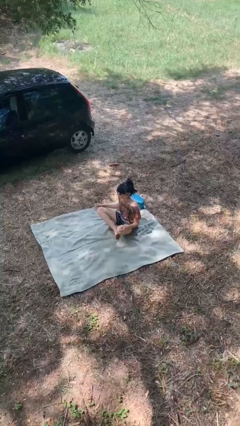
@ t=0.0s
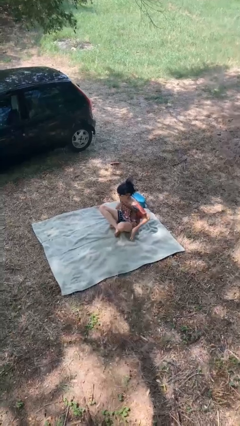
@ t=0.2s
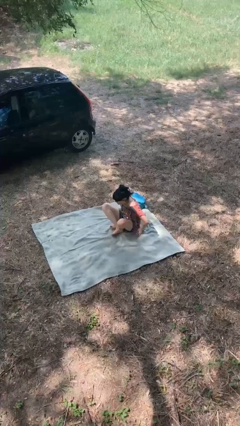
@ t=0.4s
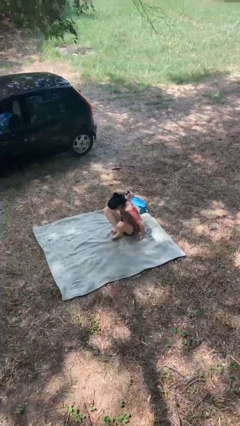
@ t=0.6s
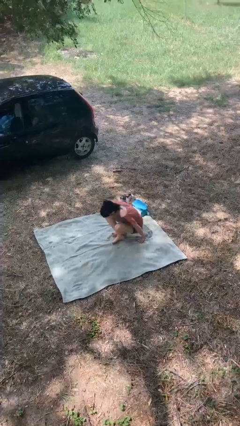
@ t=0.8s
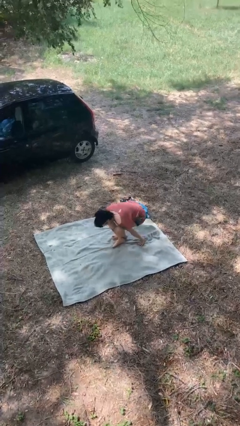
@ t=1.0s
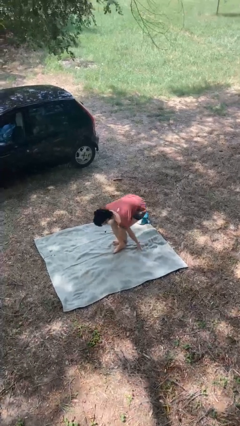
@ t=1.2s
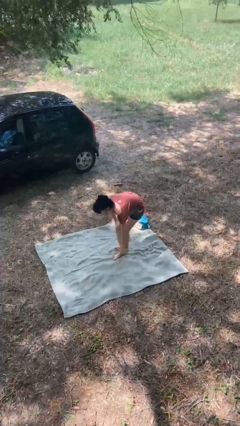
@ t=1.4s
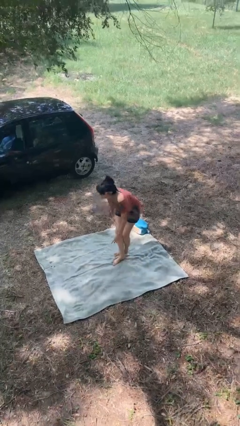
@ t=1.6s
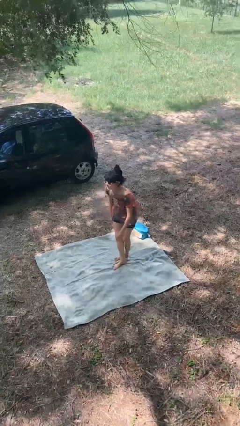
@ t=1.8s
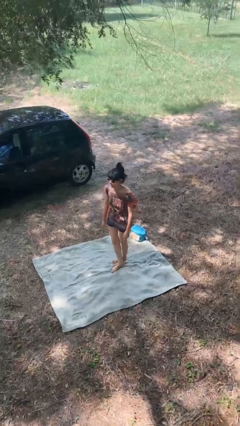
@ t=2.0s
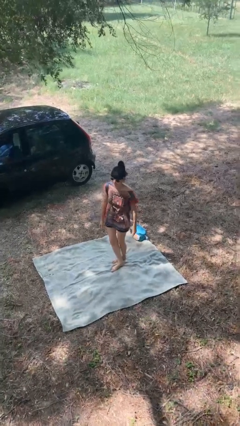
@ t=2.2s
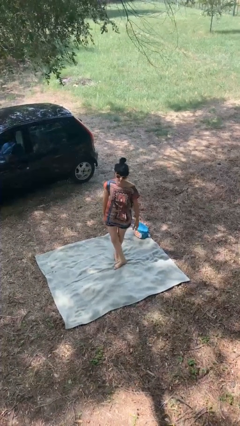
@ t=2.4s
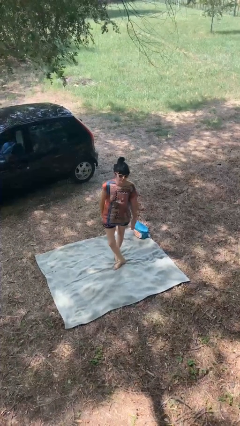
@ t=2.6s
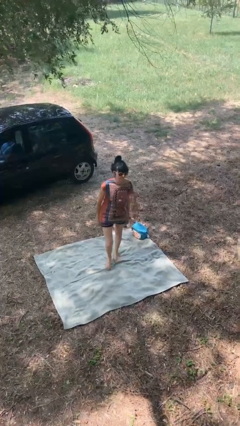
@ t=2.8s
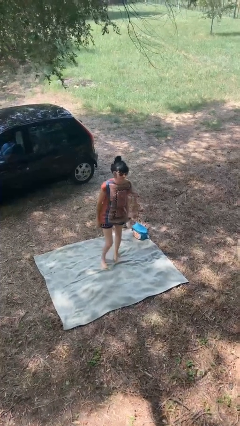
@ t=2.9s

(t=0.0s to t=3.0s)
person stands up from floor

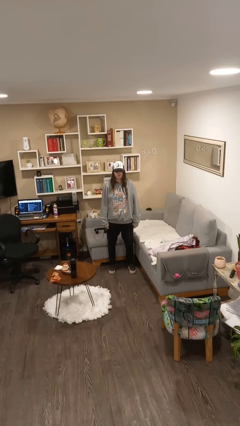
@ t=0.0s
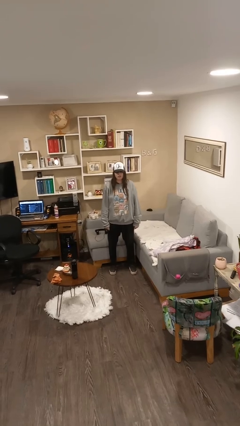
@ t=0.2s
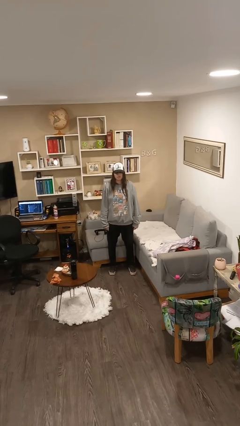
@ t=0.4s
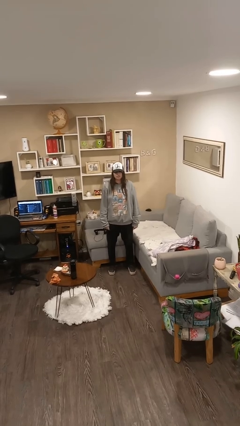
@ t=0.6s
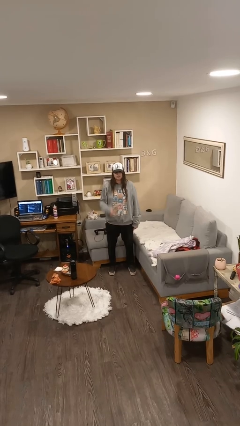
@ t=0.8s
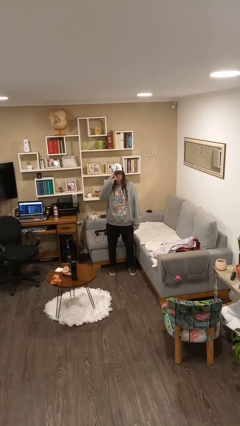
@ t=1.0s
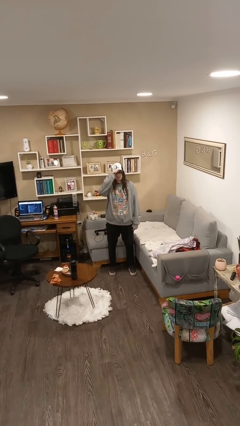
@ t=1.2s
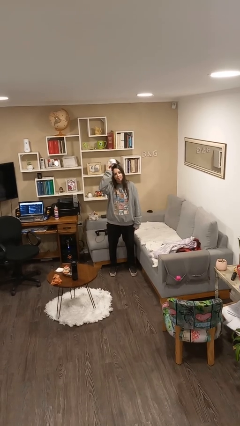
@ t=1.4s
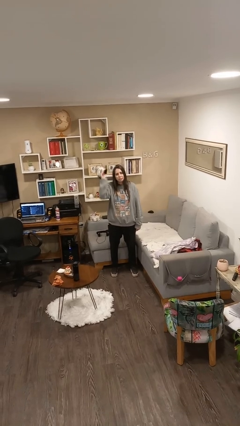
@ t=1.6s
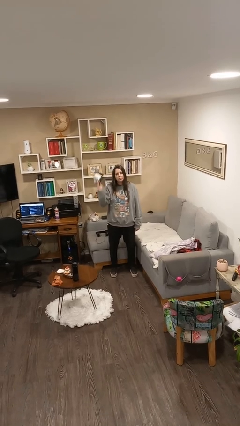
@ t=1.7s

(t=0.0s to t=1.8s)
person takes off hat

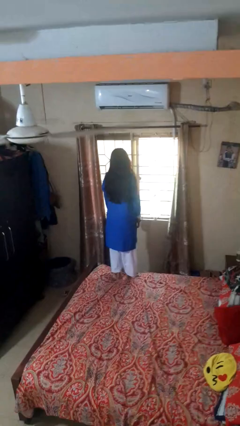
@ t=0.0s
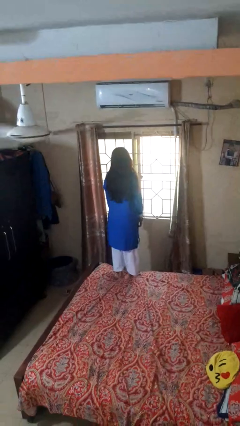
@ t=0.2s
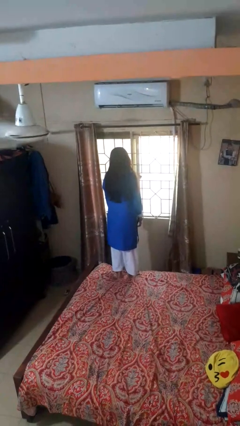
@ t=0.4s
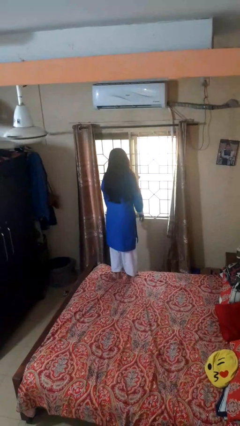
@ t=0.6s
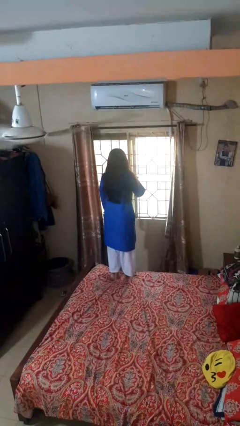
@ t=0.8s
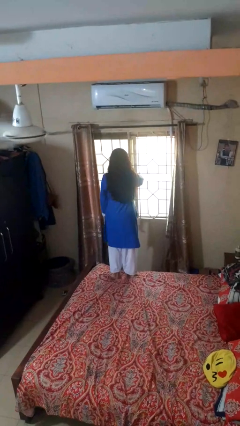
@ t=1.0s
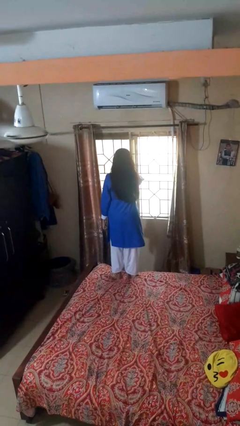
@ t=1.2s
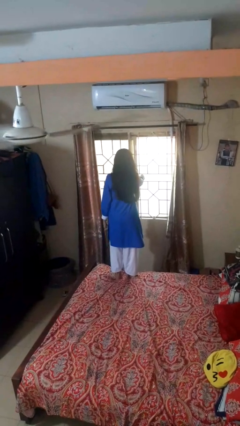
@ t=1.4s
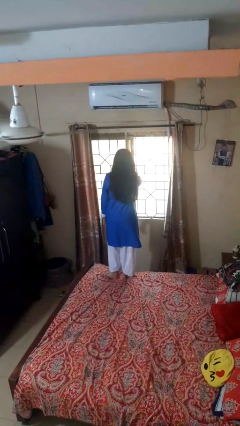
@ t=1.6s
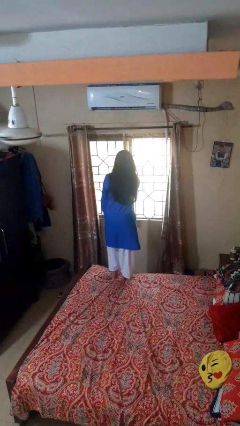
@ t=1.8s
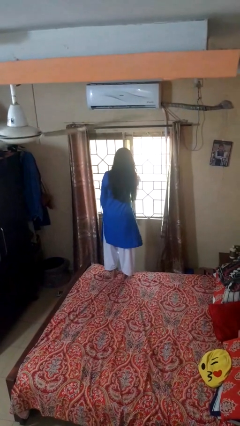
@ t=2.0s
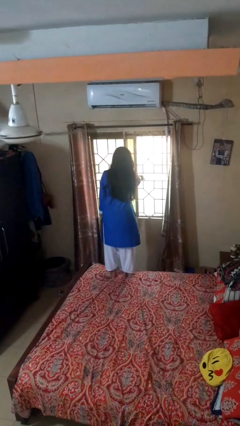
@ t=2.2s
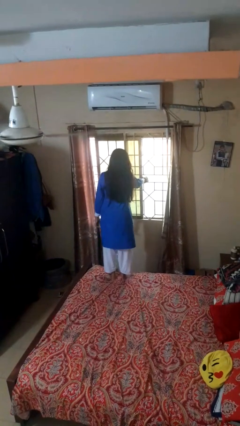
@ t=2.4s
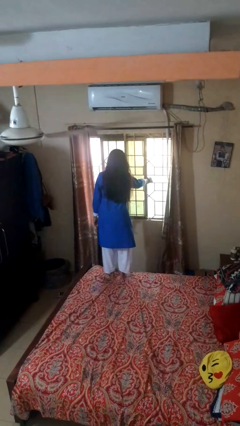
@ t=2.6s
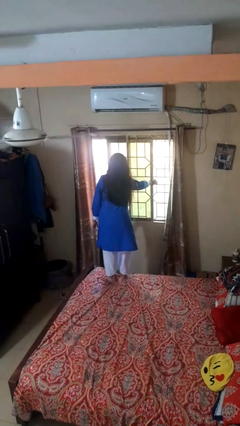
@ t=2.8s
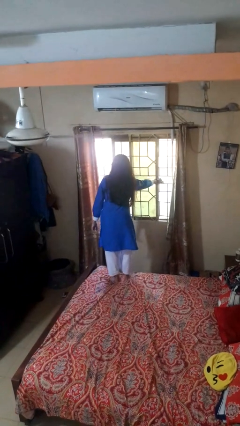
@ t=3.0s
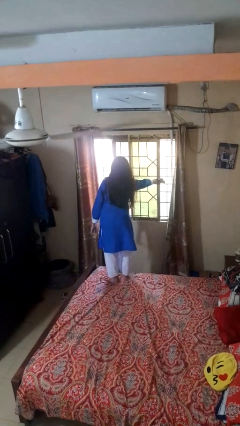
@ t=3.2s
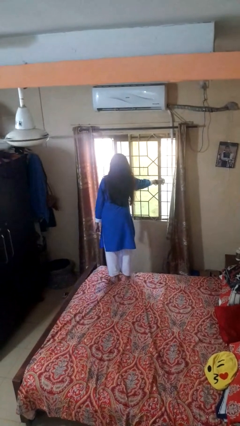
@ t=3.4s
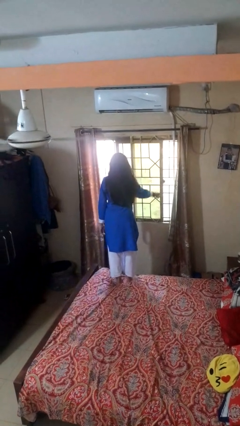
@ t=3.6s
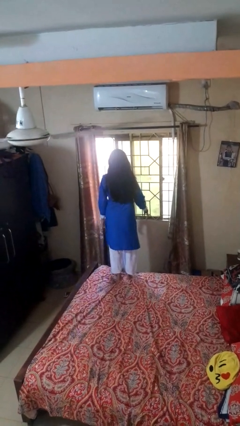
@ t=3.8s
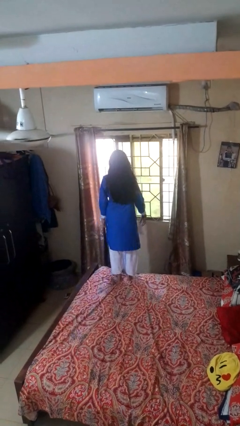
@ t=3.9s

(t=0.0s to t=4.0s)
person opens home window

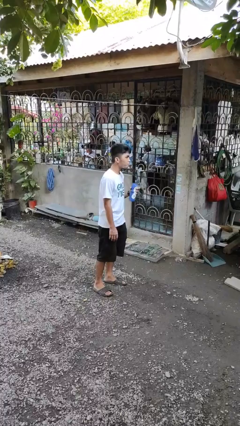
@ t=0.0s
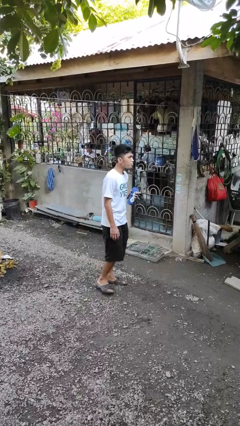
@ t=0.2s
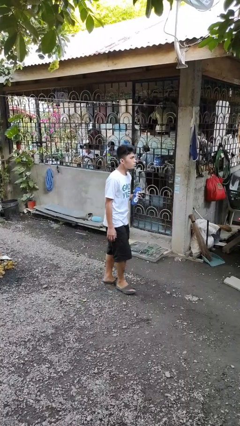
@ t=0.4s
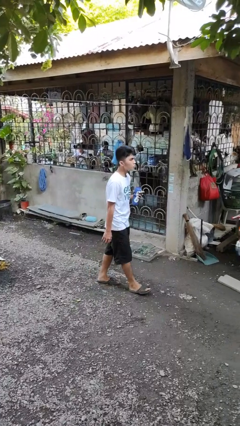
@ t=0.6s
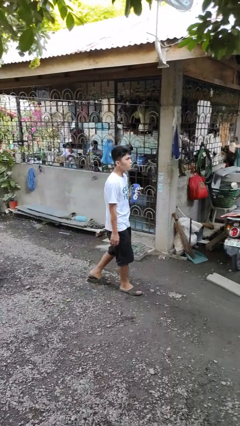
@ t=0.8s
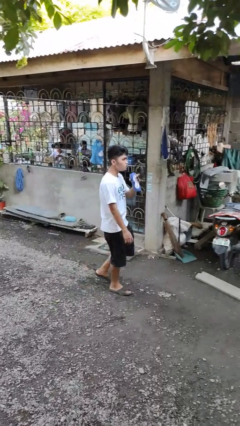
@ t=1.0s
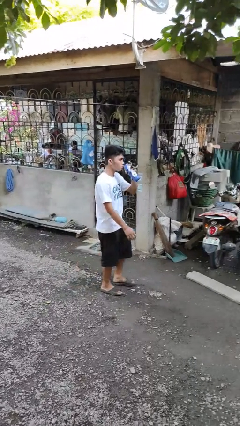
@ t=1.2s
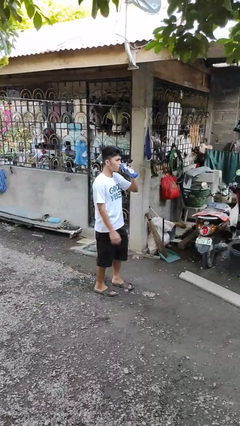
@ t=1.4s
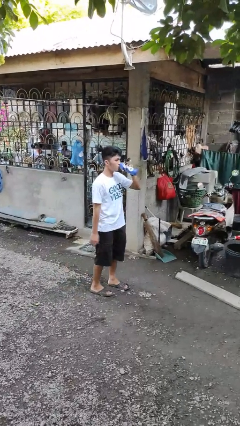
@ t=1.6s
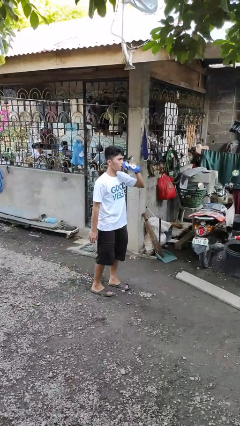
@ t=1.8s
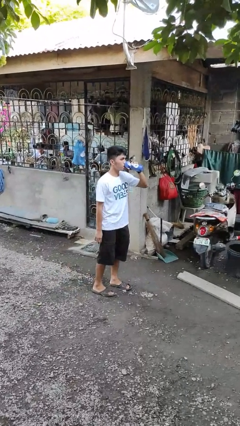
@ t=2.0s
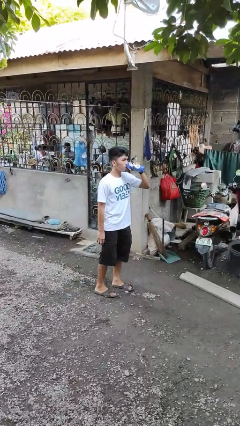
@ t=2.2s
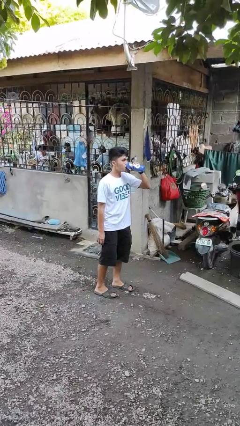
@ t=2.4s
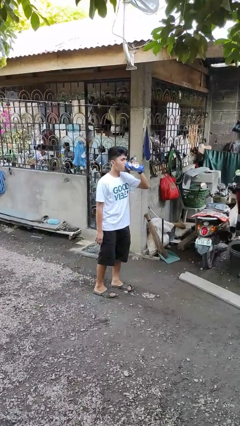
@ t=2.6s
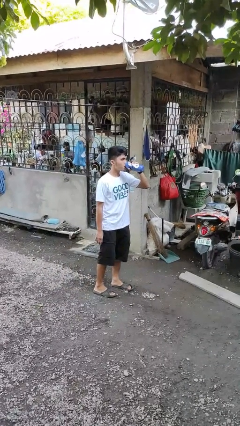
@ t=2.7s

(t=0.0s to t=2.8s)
person drinks from bottle

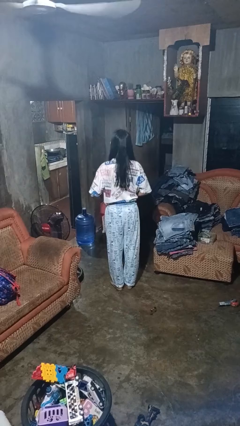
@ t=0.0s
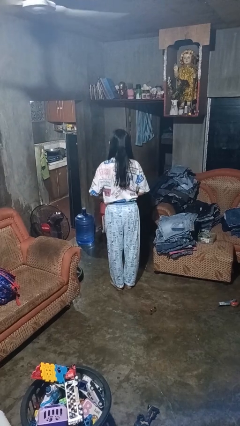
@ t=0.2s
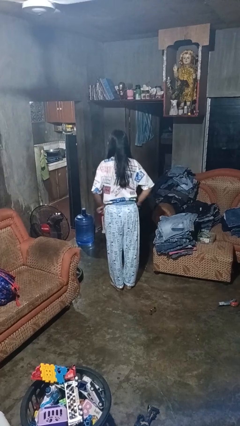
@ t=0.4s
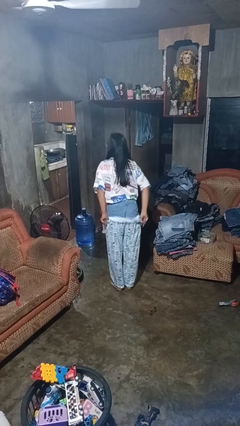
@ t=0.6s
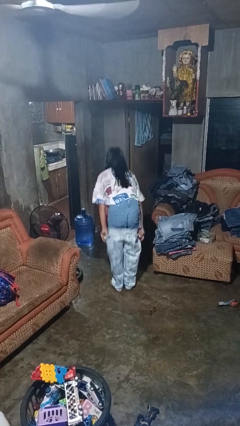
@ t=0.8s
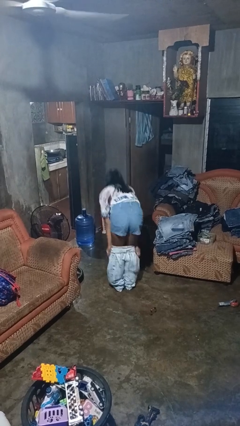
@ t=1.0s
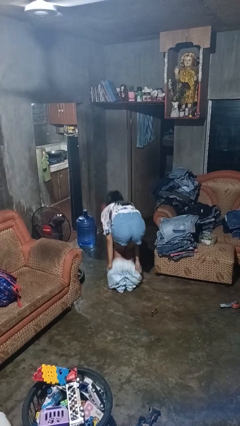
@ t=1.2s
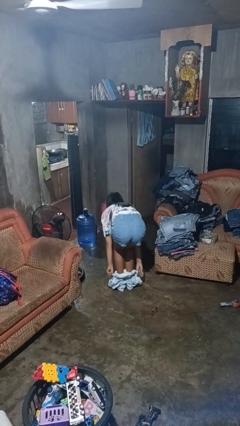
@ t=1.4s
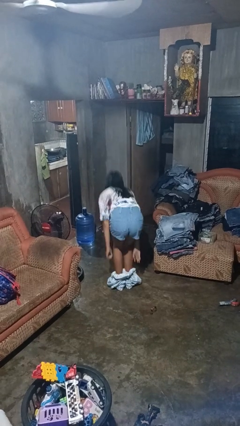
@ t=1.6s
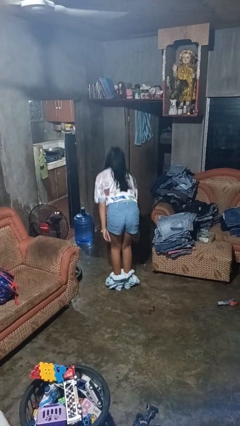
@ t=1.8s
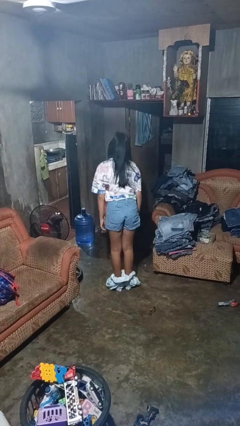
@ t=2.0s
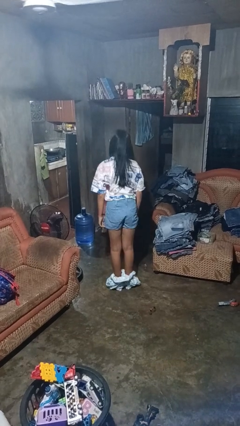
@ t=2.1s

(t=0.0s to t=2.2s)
person takes off pants

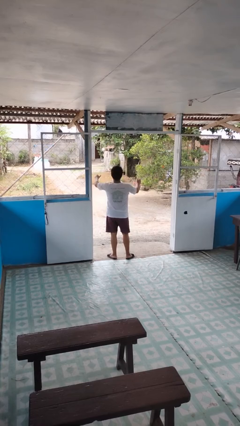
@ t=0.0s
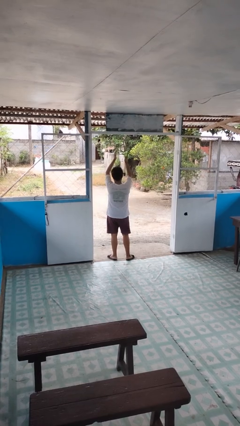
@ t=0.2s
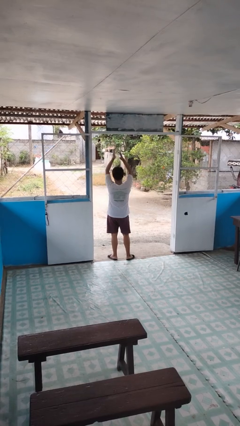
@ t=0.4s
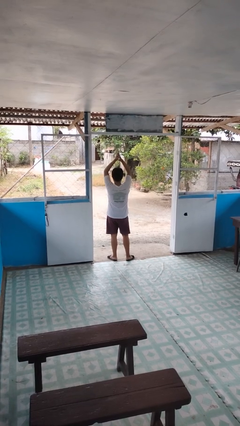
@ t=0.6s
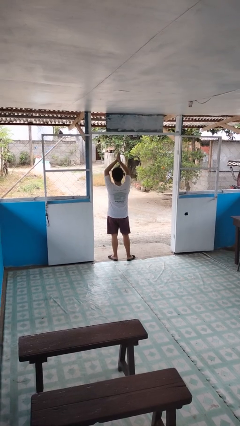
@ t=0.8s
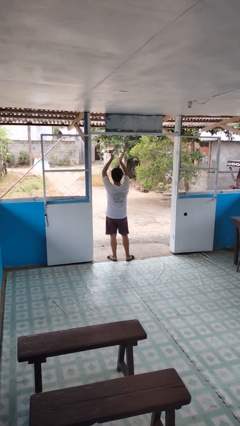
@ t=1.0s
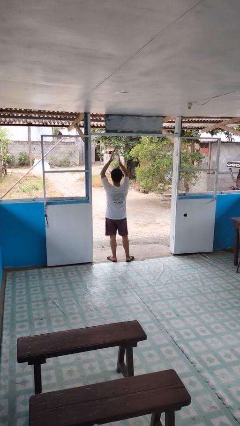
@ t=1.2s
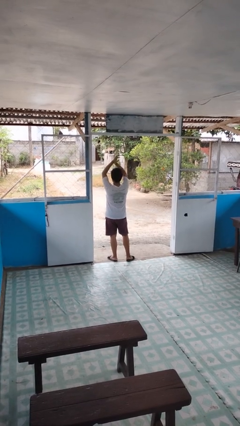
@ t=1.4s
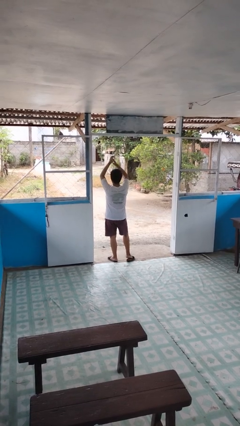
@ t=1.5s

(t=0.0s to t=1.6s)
person claps hands

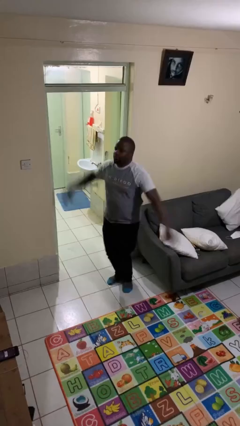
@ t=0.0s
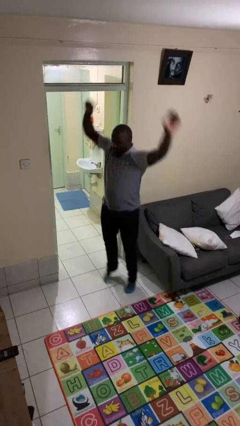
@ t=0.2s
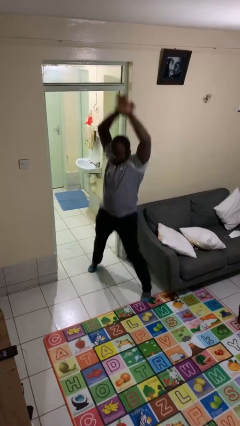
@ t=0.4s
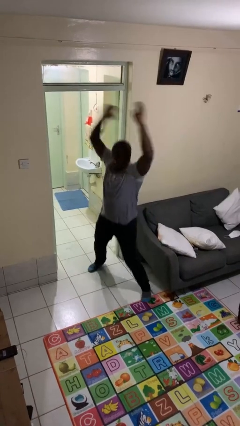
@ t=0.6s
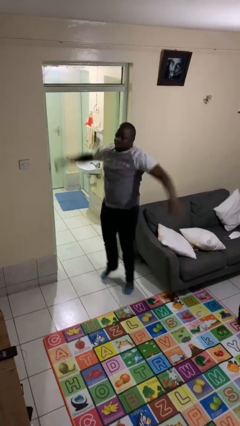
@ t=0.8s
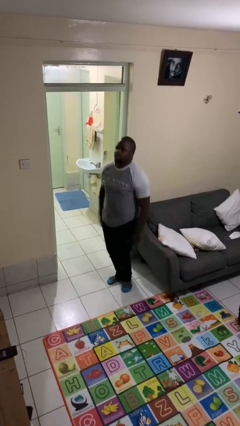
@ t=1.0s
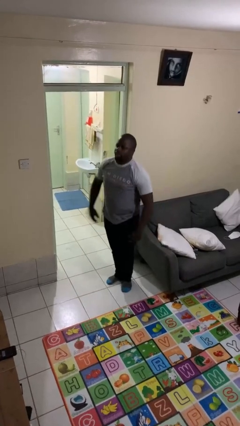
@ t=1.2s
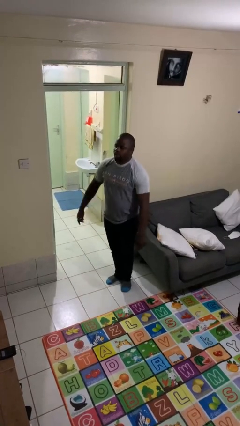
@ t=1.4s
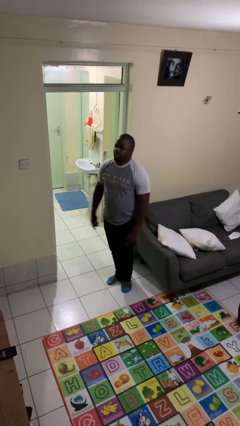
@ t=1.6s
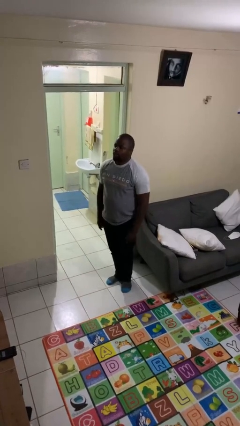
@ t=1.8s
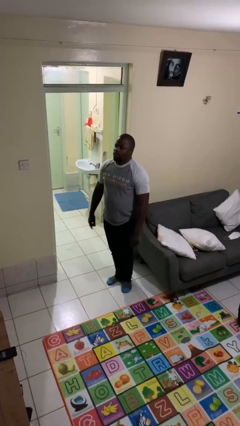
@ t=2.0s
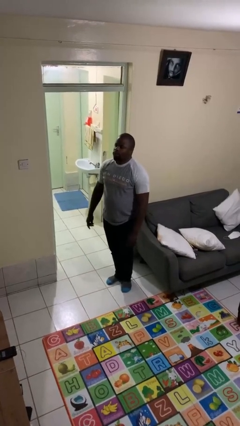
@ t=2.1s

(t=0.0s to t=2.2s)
person exercises with jumping jacks
